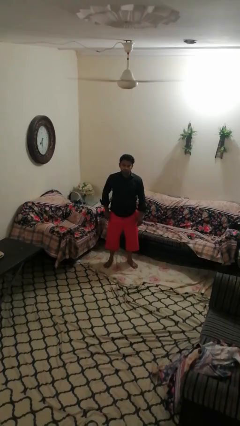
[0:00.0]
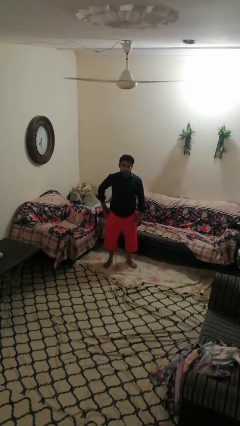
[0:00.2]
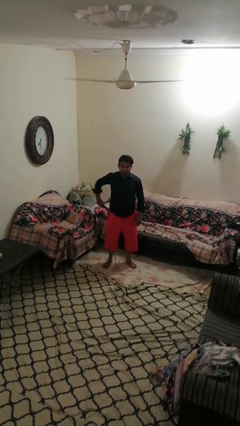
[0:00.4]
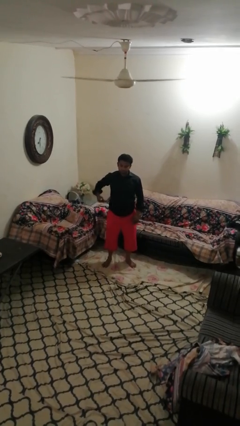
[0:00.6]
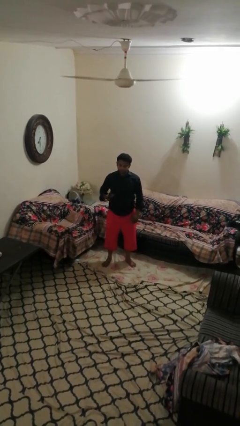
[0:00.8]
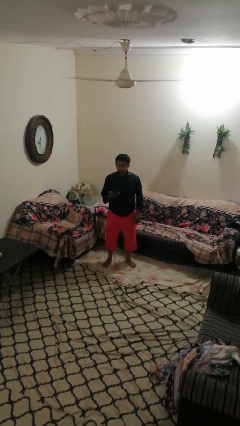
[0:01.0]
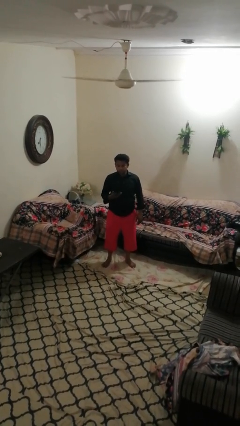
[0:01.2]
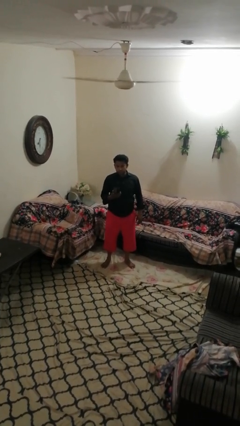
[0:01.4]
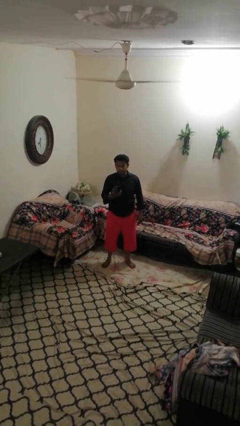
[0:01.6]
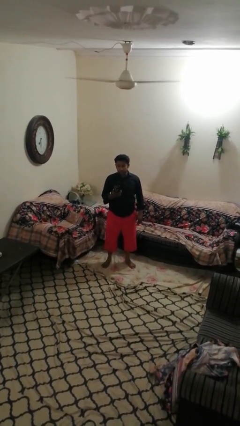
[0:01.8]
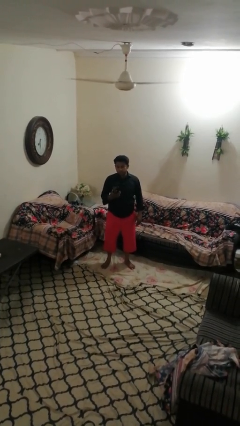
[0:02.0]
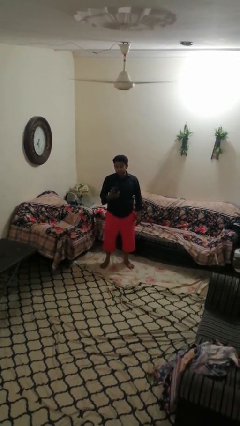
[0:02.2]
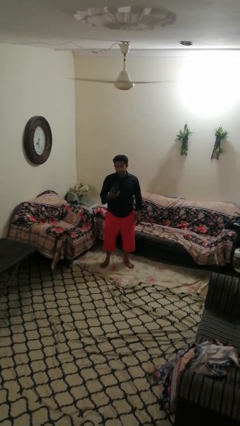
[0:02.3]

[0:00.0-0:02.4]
person takes phone from pocket

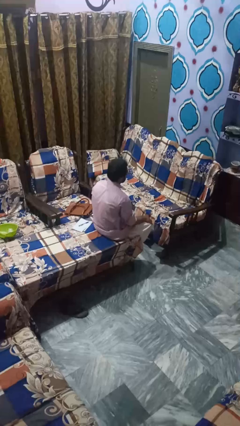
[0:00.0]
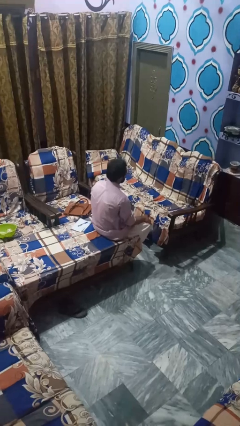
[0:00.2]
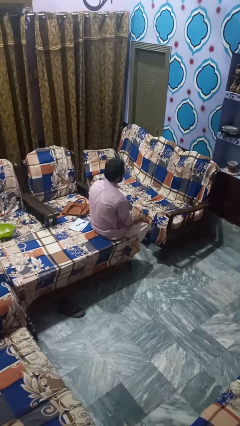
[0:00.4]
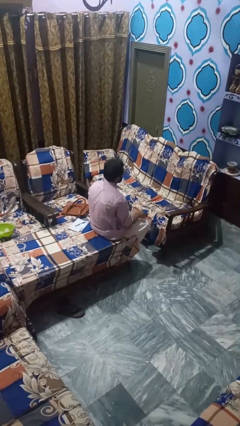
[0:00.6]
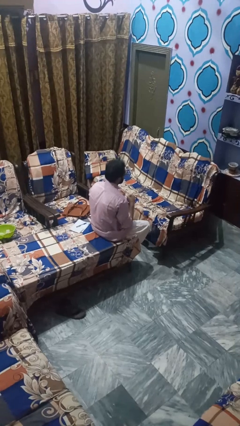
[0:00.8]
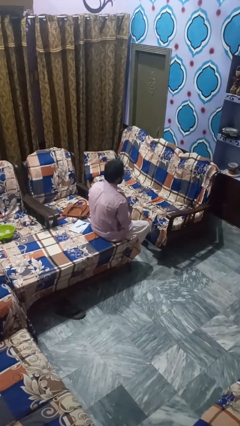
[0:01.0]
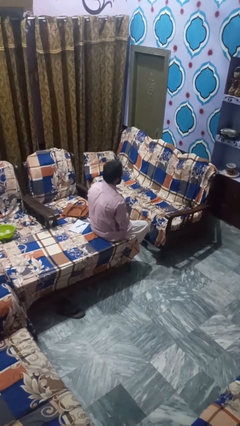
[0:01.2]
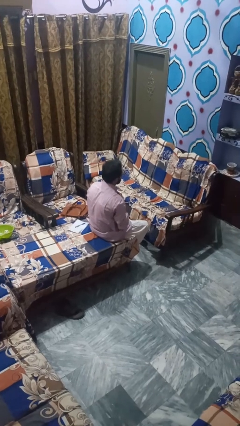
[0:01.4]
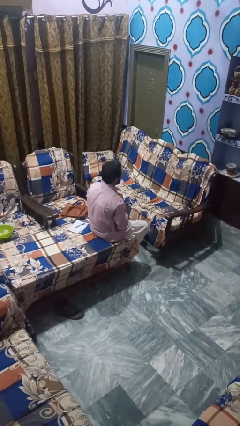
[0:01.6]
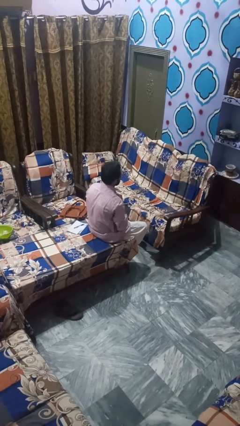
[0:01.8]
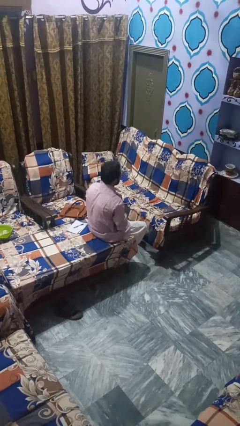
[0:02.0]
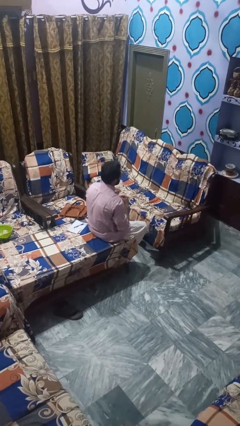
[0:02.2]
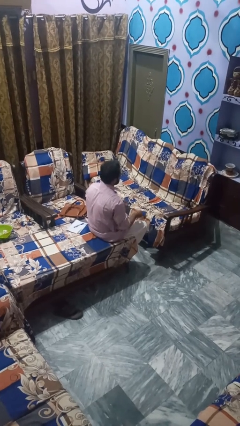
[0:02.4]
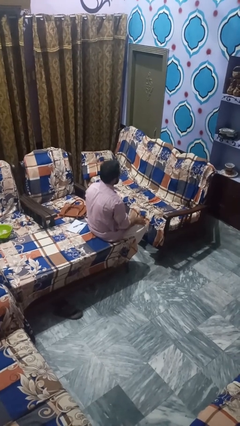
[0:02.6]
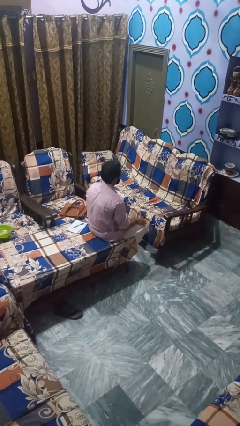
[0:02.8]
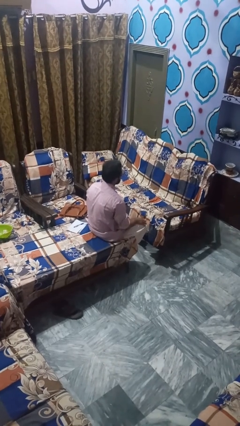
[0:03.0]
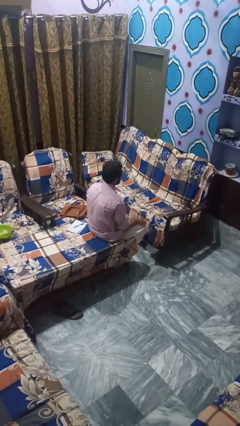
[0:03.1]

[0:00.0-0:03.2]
person unbuttons shirt

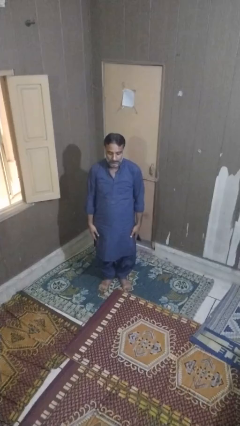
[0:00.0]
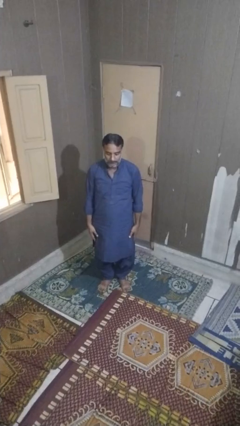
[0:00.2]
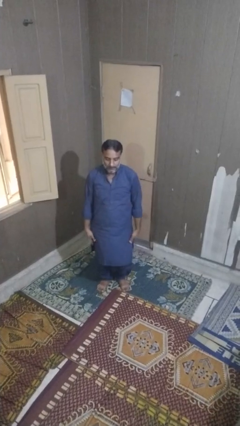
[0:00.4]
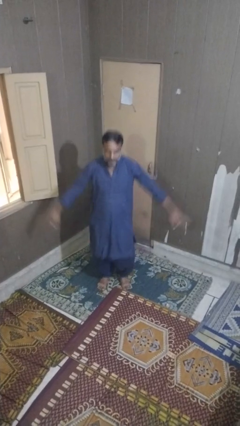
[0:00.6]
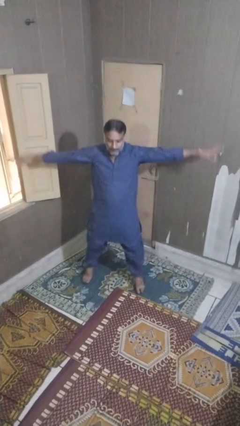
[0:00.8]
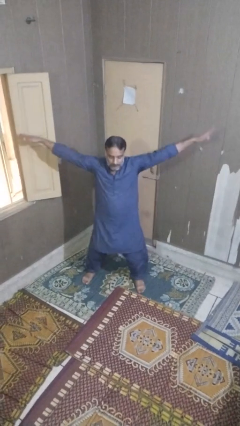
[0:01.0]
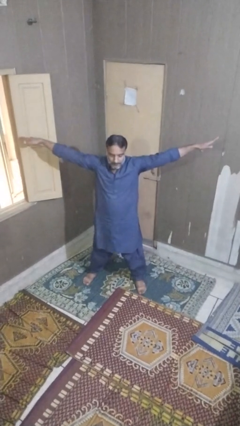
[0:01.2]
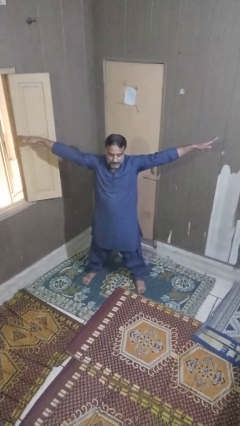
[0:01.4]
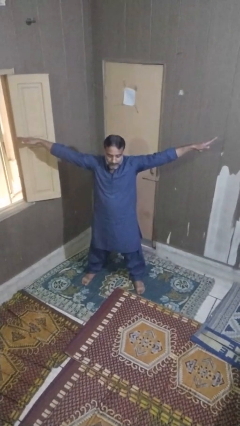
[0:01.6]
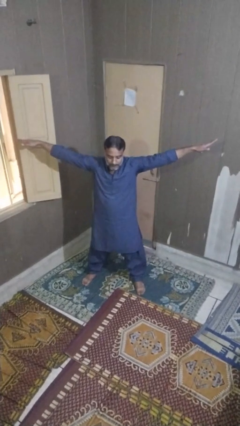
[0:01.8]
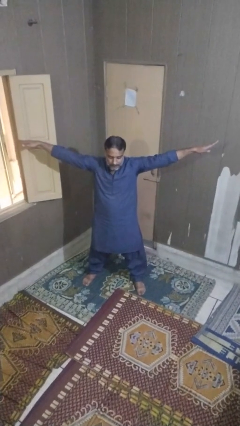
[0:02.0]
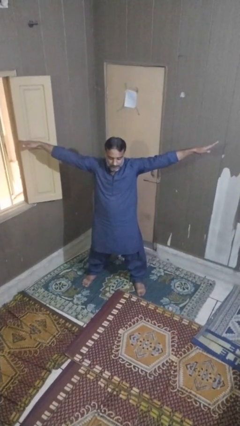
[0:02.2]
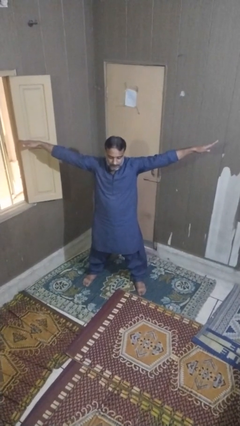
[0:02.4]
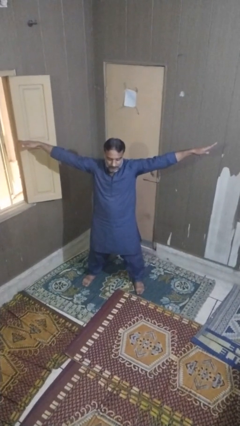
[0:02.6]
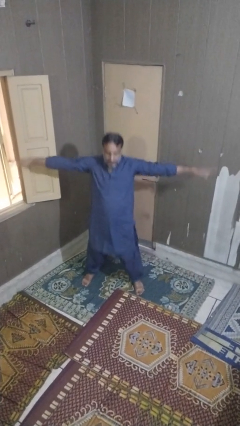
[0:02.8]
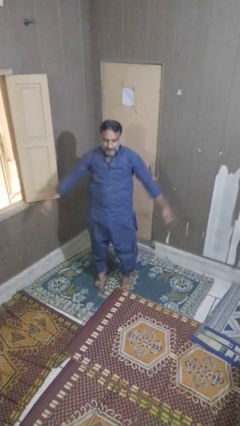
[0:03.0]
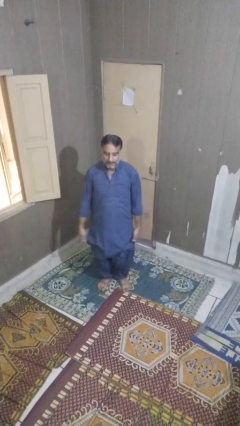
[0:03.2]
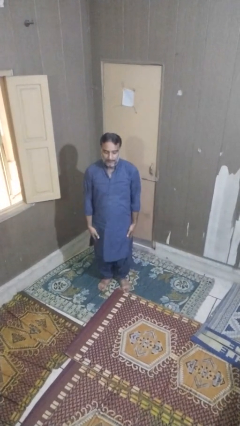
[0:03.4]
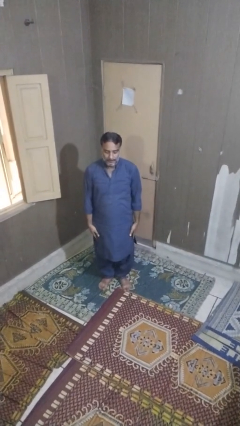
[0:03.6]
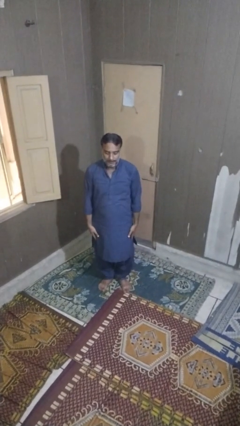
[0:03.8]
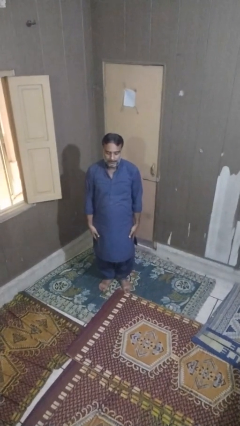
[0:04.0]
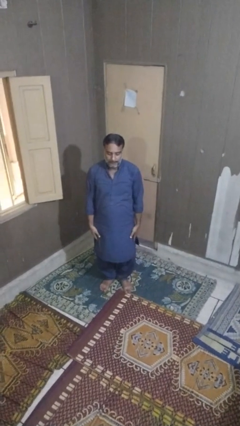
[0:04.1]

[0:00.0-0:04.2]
person exercises with jumping jacks

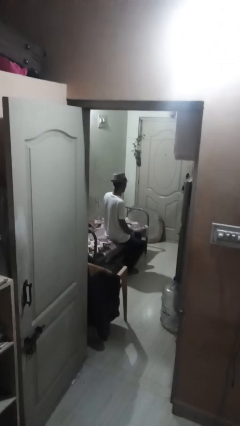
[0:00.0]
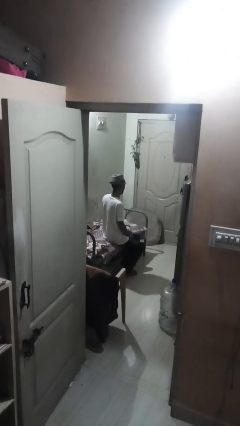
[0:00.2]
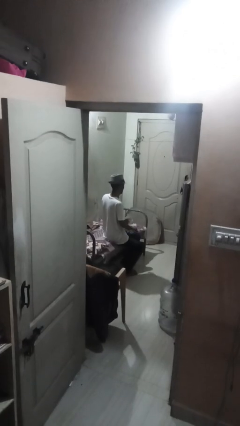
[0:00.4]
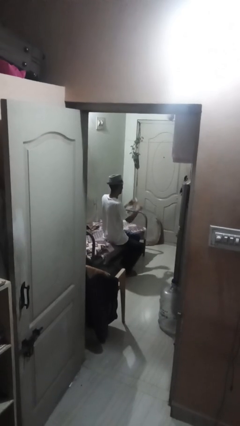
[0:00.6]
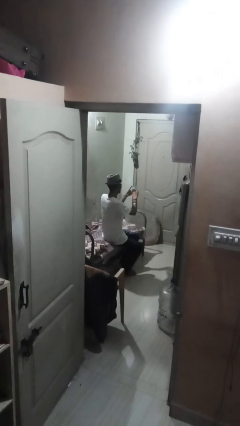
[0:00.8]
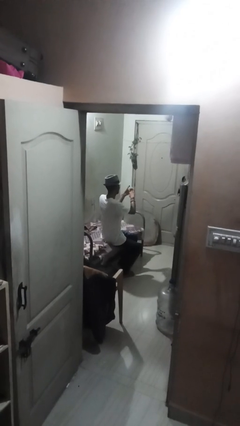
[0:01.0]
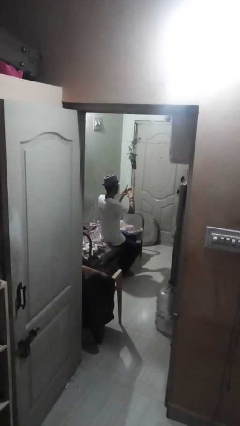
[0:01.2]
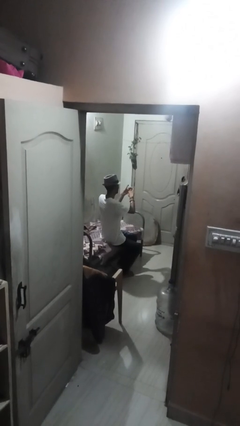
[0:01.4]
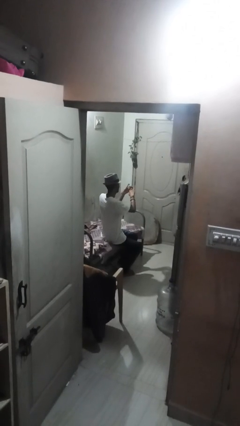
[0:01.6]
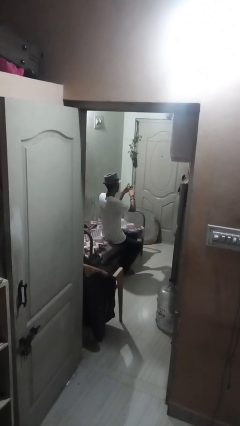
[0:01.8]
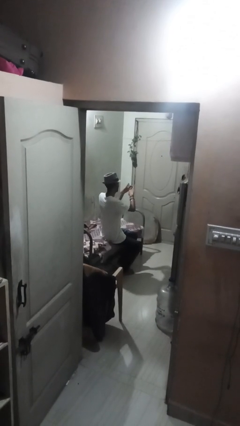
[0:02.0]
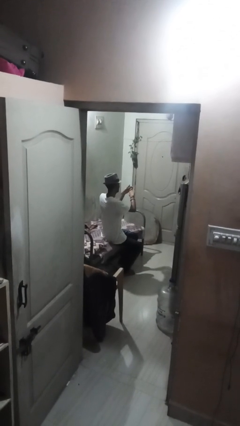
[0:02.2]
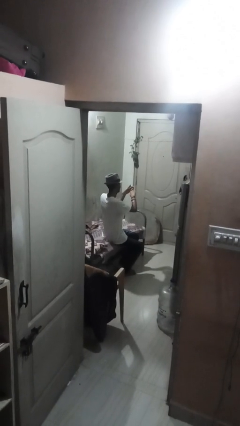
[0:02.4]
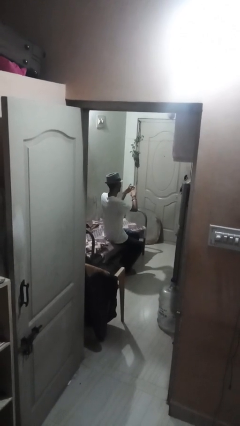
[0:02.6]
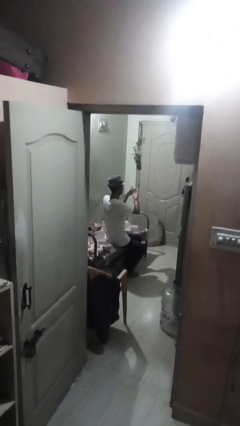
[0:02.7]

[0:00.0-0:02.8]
person clips fingernails

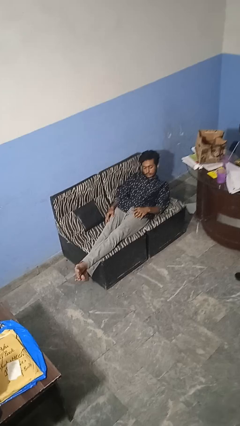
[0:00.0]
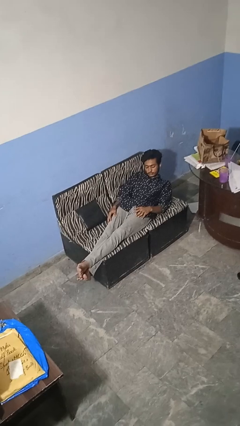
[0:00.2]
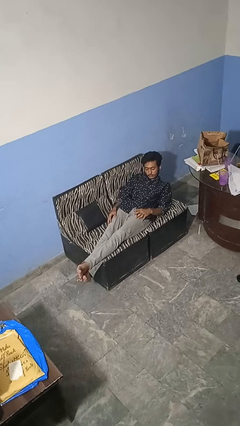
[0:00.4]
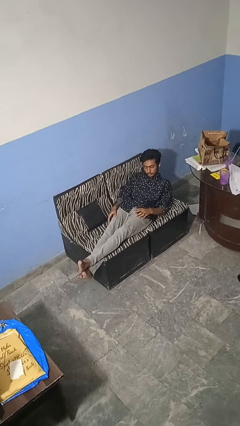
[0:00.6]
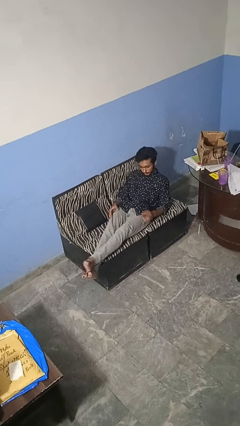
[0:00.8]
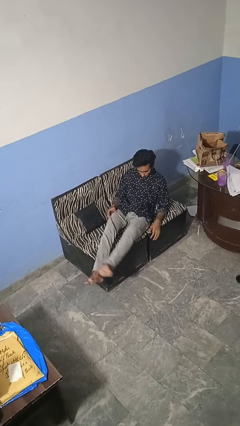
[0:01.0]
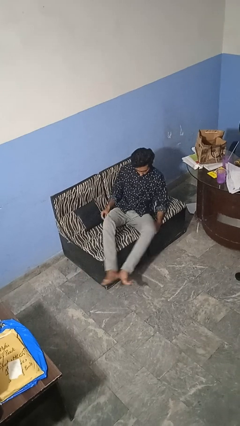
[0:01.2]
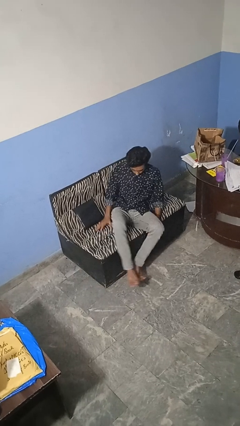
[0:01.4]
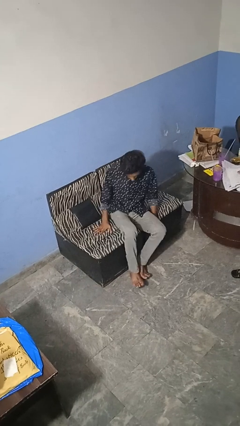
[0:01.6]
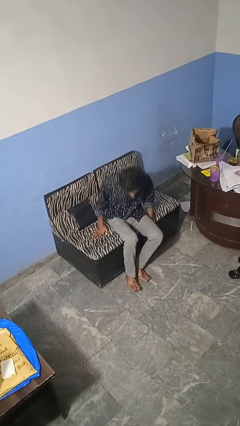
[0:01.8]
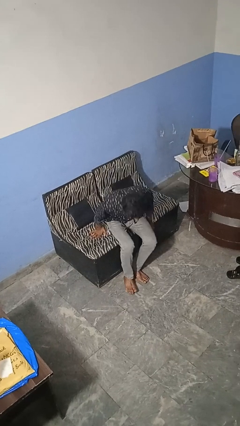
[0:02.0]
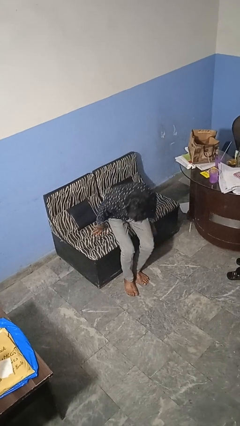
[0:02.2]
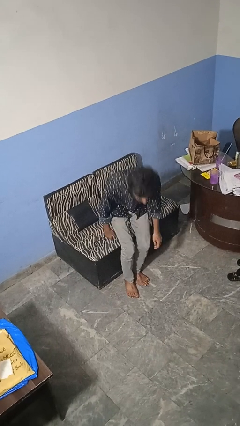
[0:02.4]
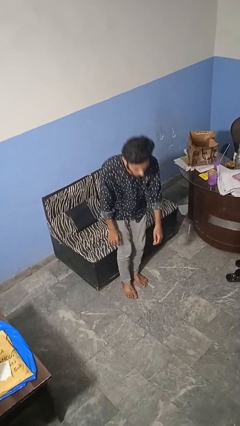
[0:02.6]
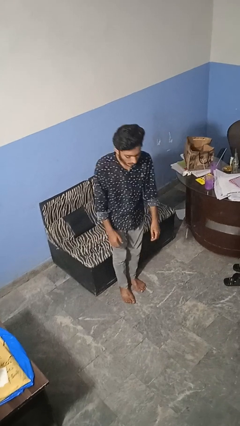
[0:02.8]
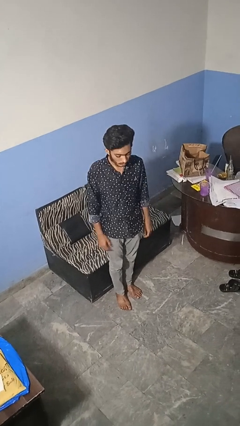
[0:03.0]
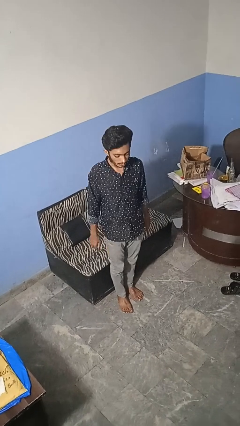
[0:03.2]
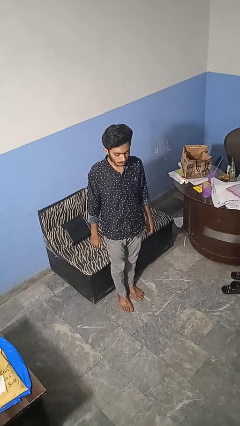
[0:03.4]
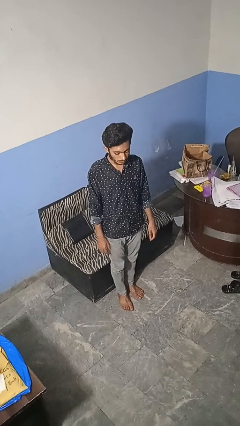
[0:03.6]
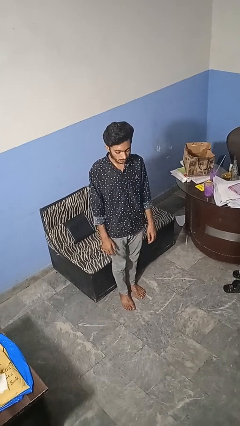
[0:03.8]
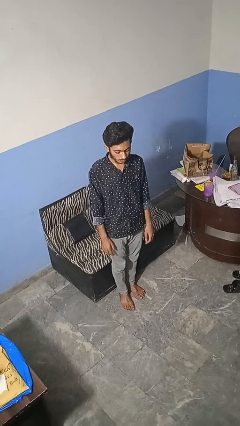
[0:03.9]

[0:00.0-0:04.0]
person stands up

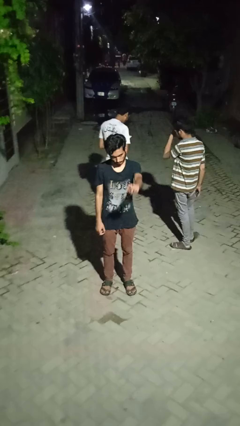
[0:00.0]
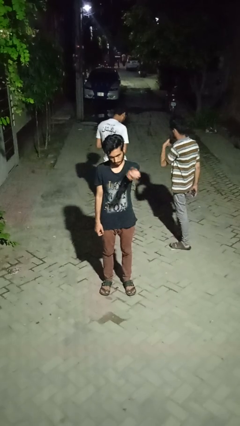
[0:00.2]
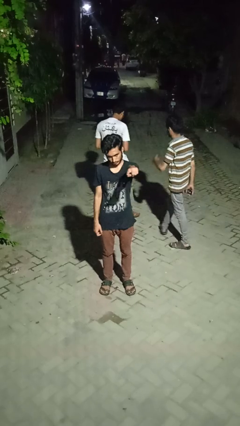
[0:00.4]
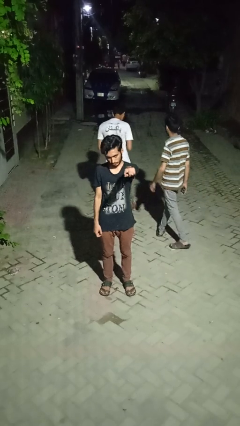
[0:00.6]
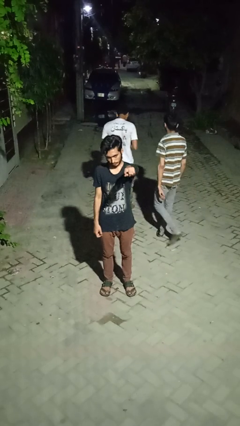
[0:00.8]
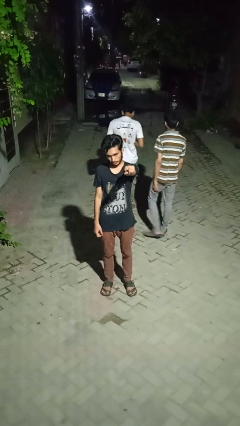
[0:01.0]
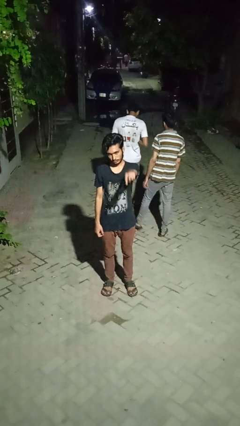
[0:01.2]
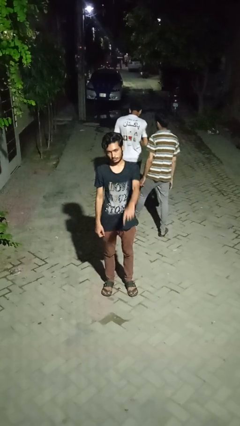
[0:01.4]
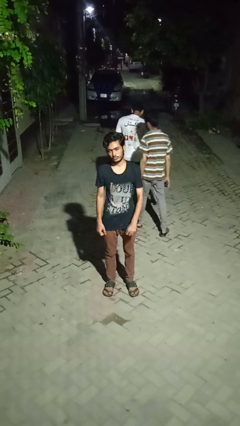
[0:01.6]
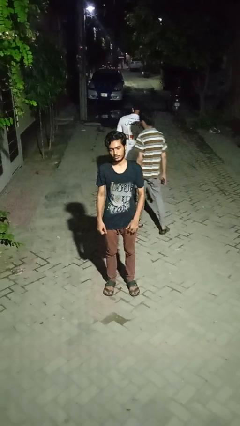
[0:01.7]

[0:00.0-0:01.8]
person points at person
